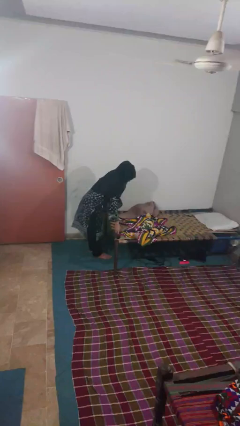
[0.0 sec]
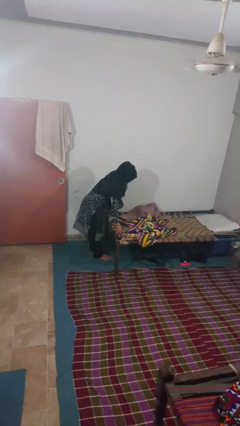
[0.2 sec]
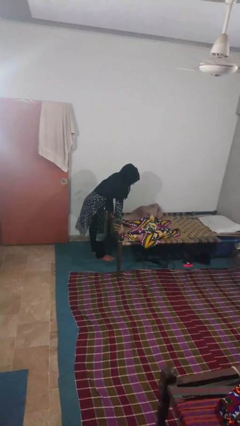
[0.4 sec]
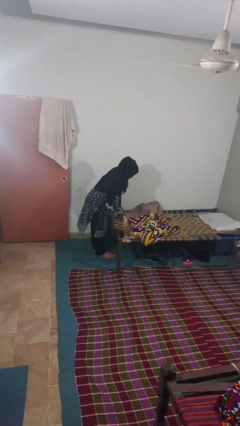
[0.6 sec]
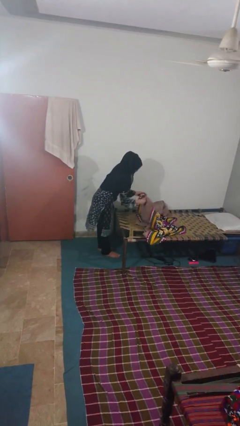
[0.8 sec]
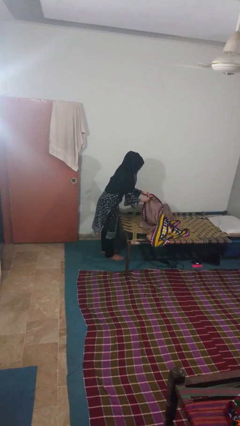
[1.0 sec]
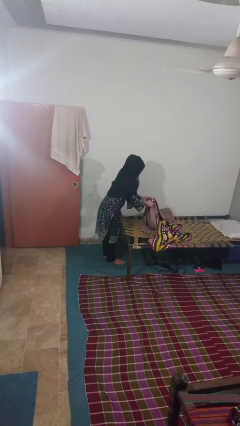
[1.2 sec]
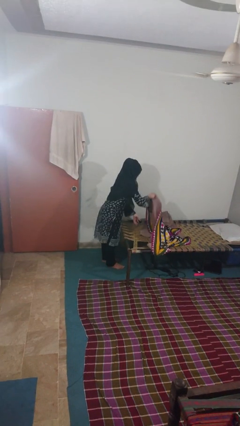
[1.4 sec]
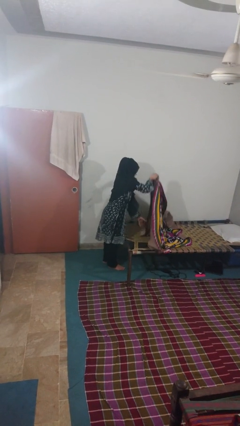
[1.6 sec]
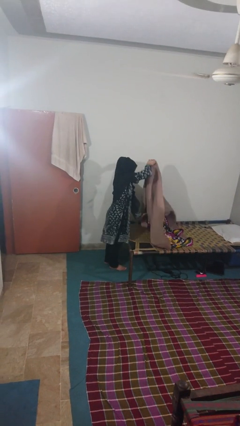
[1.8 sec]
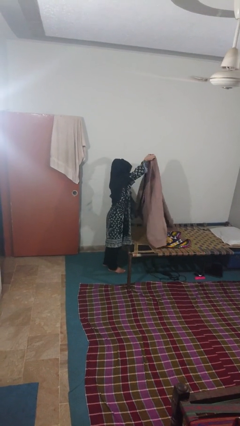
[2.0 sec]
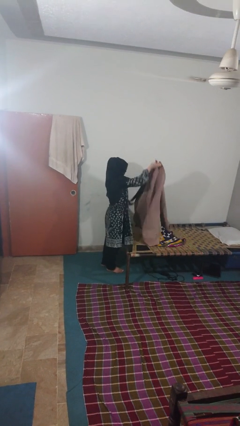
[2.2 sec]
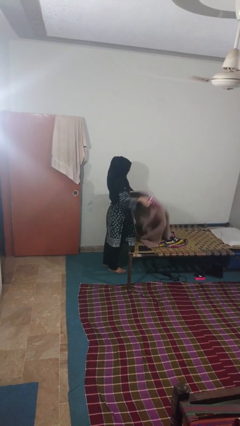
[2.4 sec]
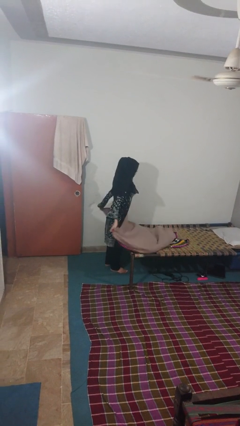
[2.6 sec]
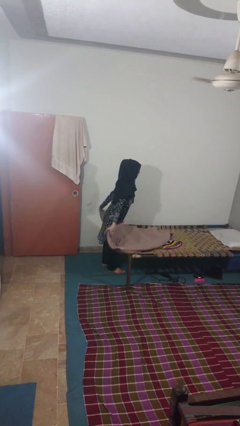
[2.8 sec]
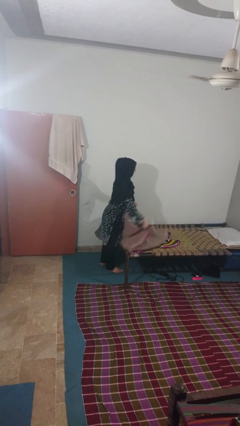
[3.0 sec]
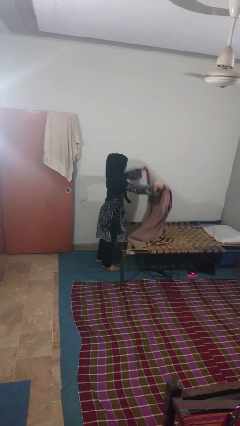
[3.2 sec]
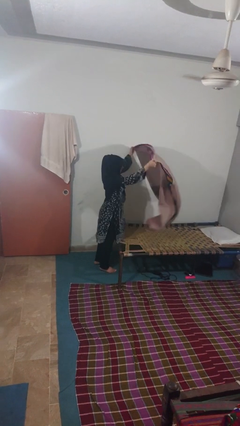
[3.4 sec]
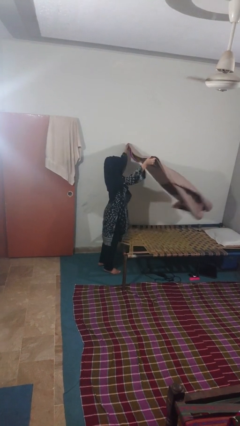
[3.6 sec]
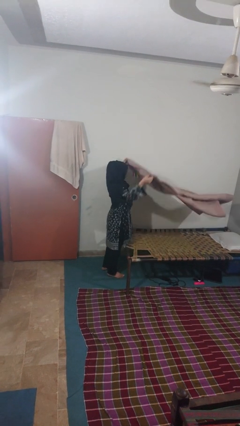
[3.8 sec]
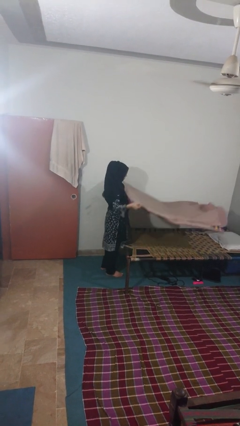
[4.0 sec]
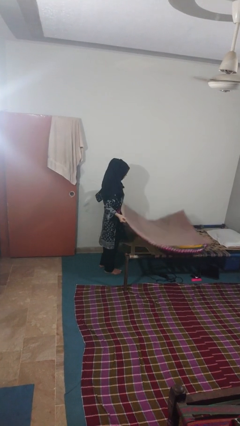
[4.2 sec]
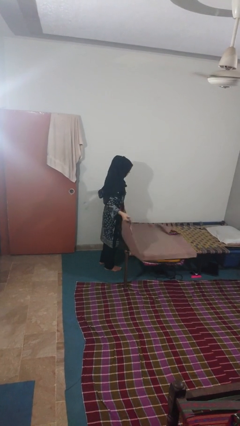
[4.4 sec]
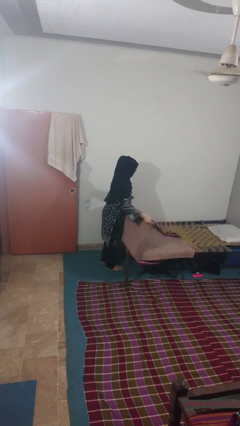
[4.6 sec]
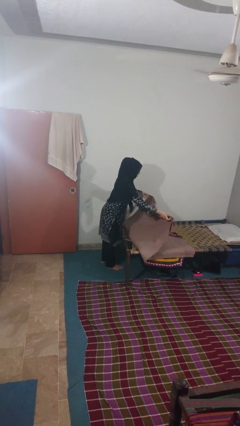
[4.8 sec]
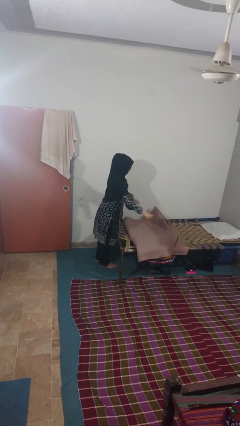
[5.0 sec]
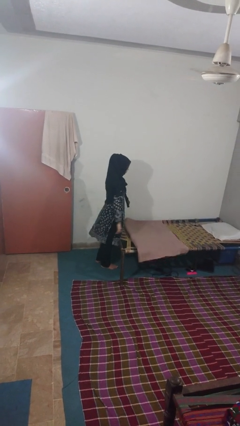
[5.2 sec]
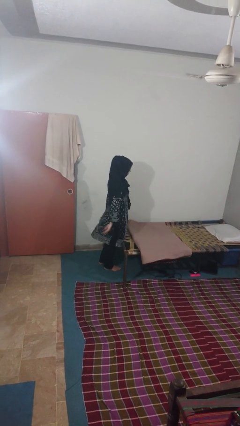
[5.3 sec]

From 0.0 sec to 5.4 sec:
person folds blanket

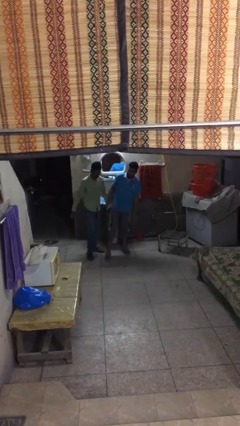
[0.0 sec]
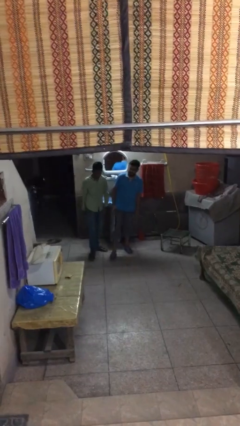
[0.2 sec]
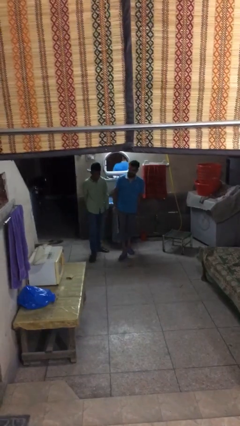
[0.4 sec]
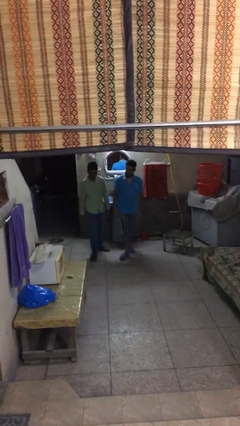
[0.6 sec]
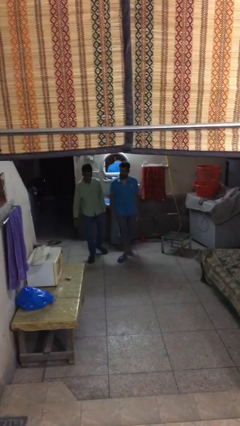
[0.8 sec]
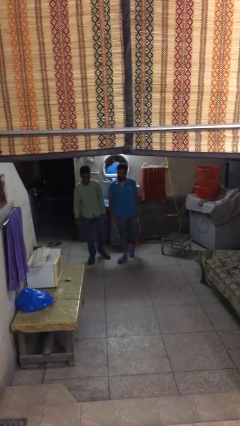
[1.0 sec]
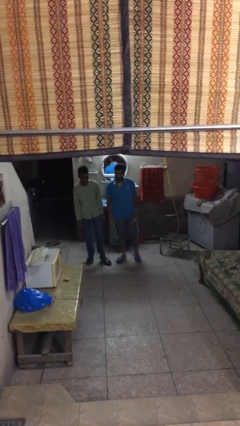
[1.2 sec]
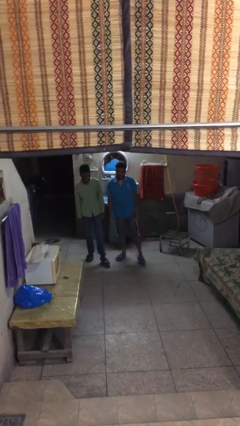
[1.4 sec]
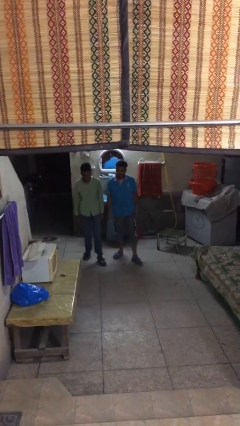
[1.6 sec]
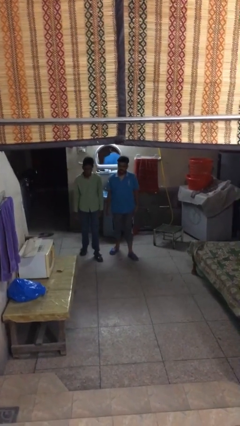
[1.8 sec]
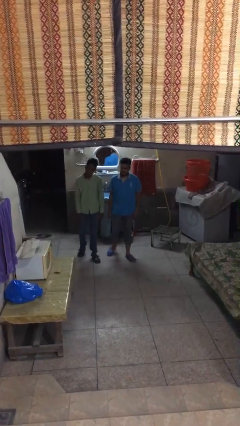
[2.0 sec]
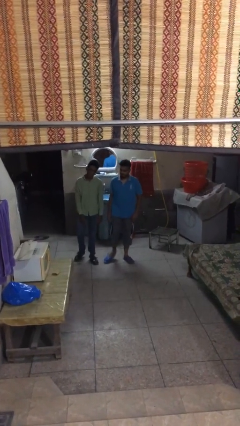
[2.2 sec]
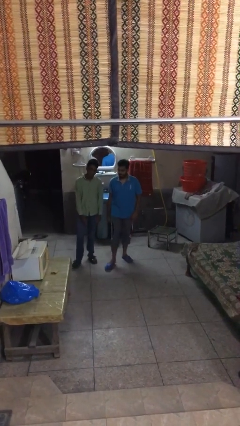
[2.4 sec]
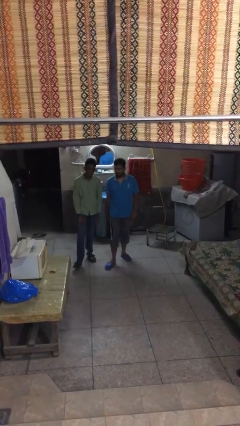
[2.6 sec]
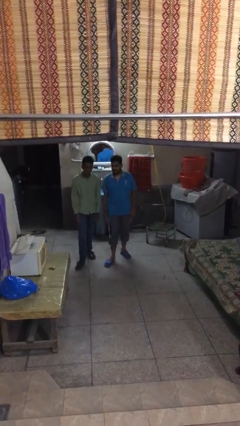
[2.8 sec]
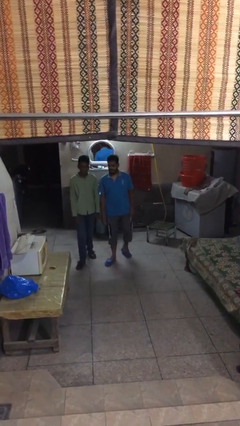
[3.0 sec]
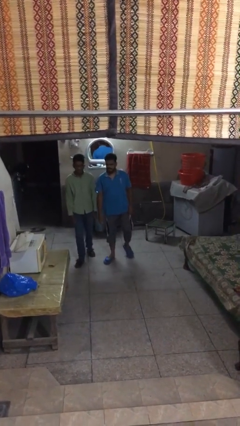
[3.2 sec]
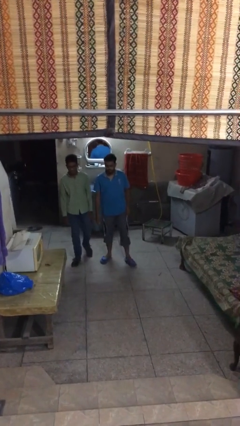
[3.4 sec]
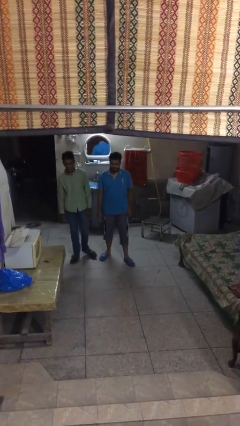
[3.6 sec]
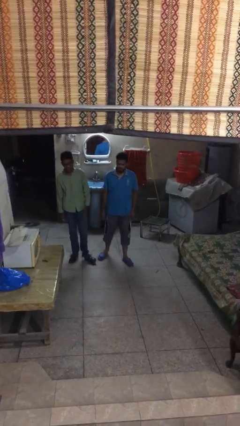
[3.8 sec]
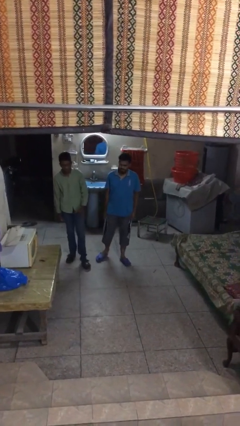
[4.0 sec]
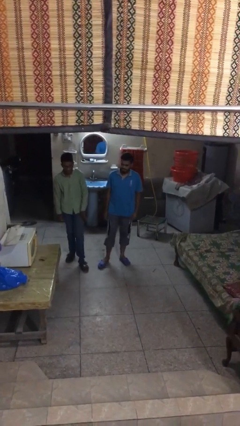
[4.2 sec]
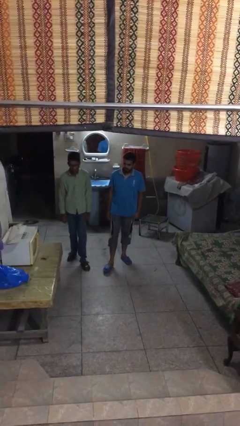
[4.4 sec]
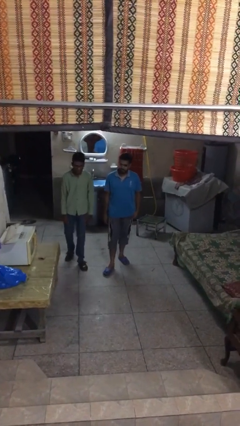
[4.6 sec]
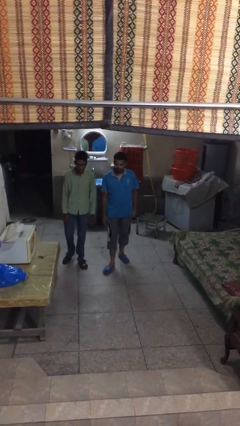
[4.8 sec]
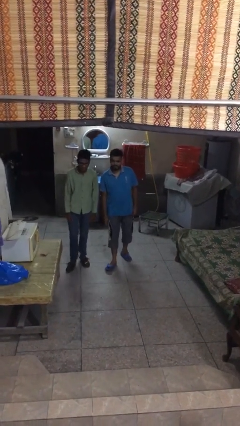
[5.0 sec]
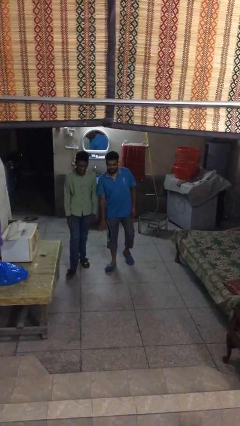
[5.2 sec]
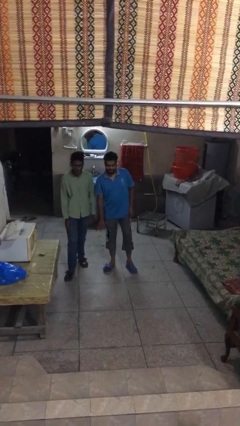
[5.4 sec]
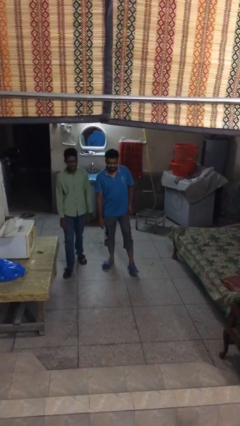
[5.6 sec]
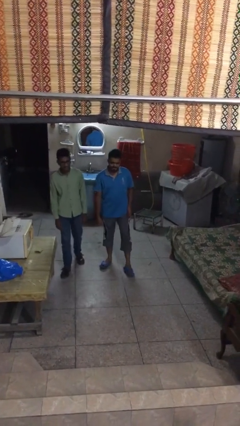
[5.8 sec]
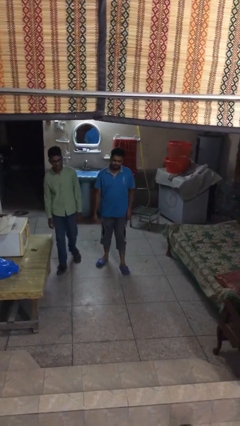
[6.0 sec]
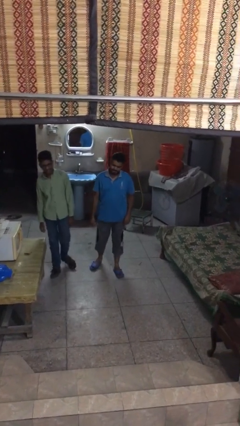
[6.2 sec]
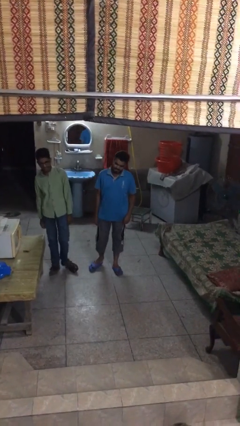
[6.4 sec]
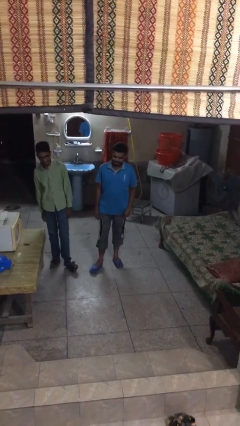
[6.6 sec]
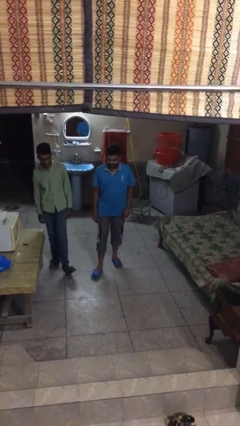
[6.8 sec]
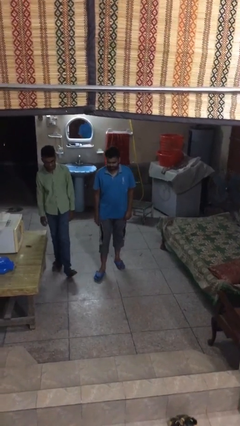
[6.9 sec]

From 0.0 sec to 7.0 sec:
person talks to person

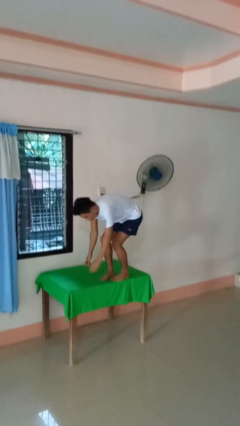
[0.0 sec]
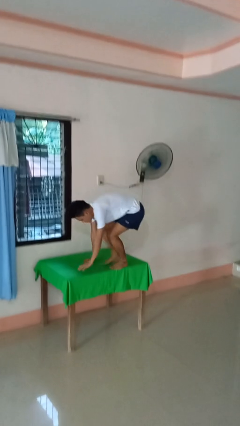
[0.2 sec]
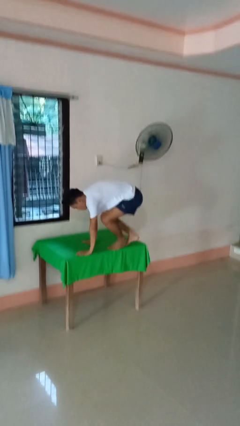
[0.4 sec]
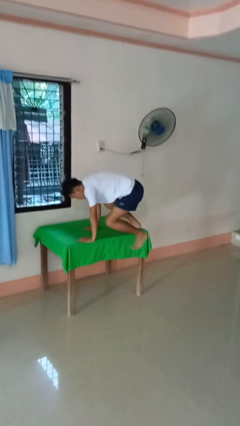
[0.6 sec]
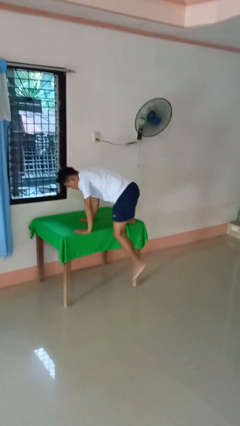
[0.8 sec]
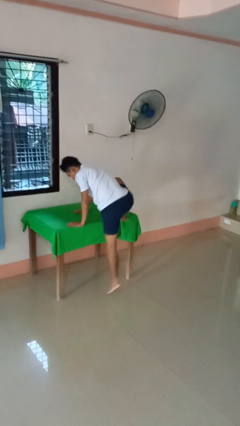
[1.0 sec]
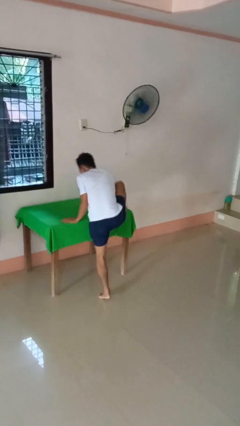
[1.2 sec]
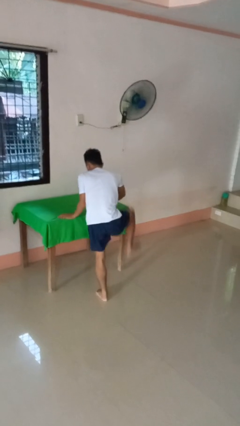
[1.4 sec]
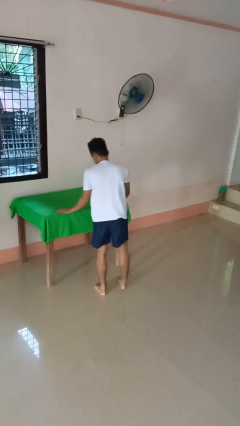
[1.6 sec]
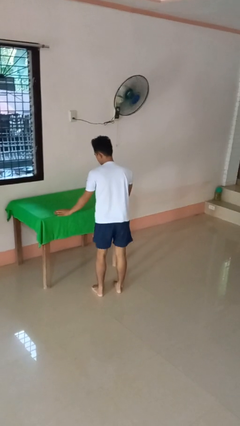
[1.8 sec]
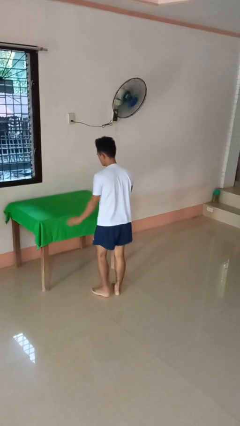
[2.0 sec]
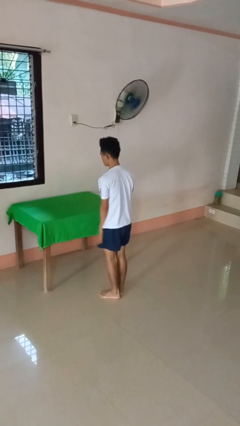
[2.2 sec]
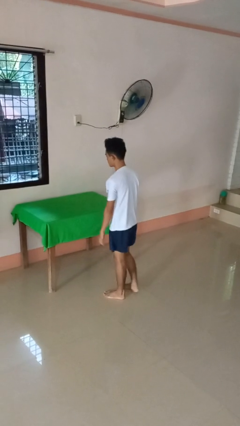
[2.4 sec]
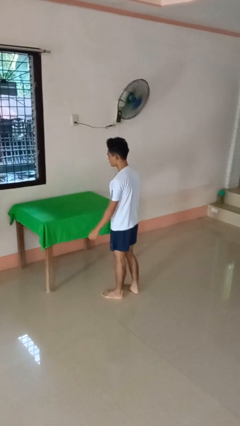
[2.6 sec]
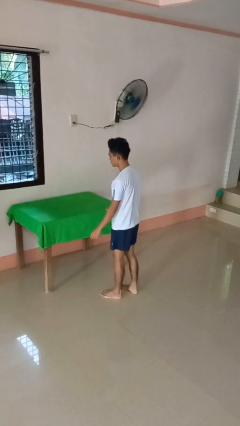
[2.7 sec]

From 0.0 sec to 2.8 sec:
person climbs off table

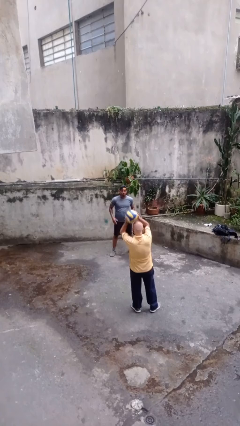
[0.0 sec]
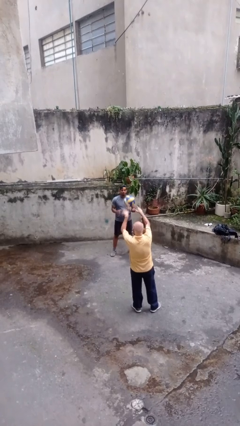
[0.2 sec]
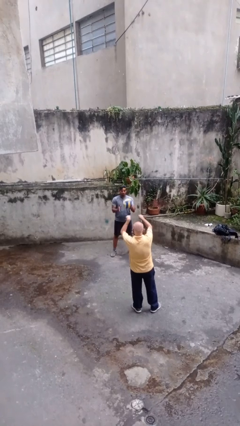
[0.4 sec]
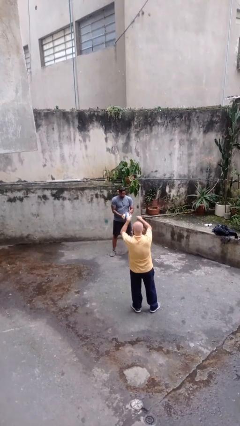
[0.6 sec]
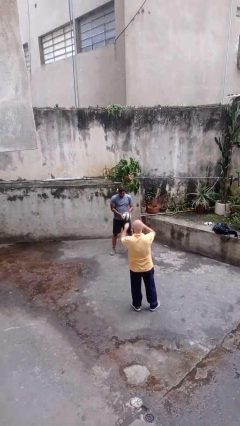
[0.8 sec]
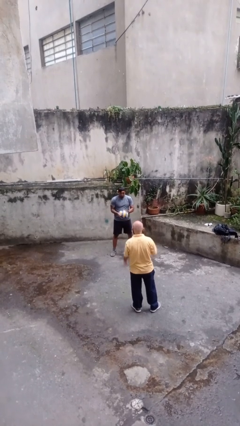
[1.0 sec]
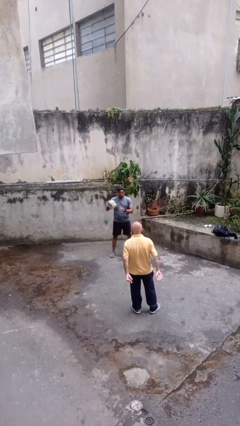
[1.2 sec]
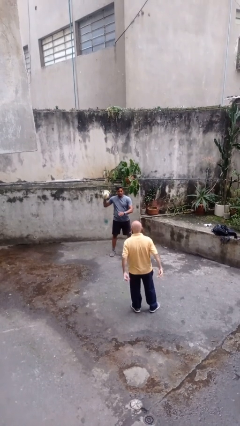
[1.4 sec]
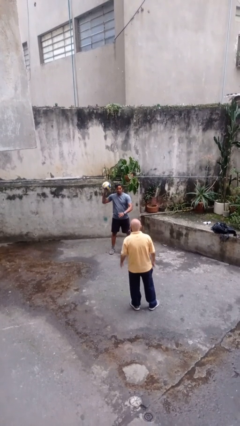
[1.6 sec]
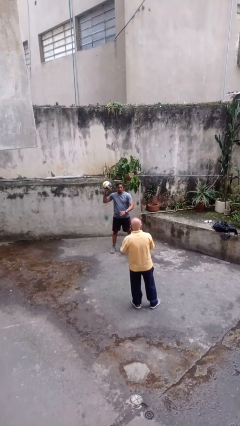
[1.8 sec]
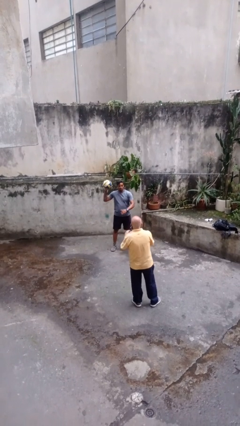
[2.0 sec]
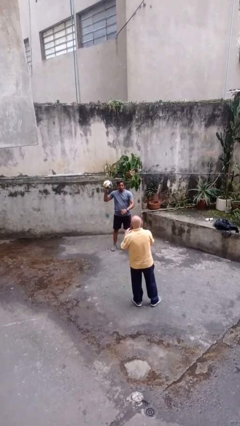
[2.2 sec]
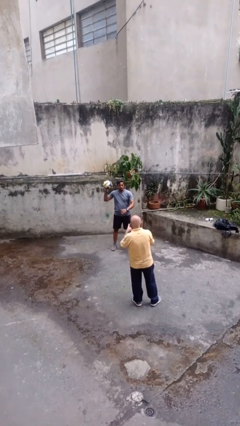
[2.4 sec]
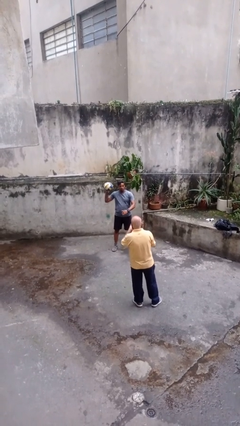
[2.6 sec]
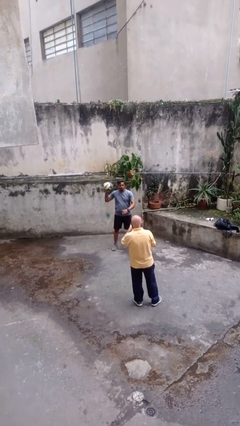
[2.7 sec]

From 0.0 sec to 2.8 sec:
person catches object from person
